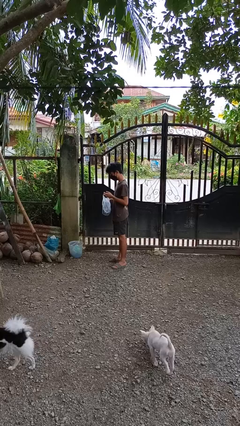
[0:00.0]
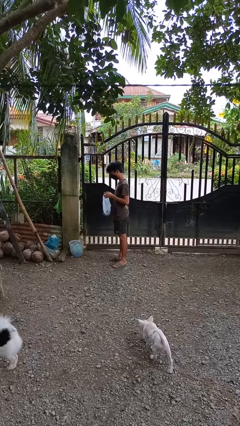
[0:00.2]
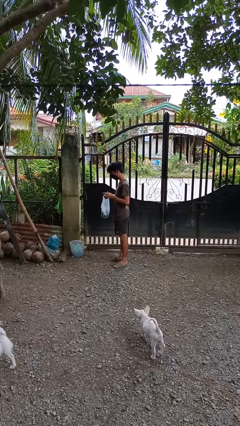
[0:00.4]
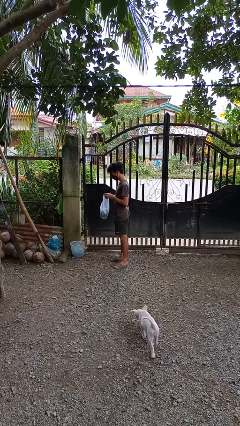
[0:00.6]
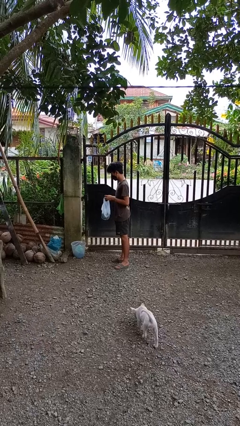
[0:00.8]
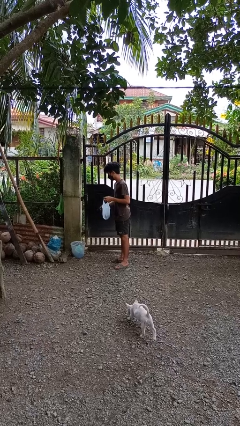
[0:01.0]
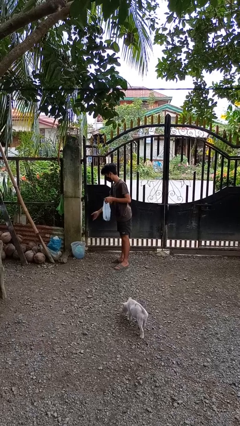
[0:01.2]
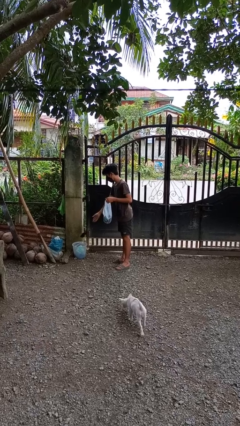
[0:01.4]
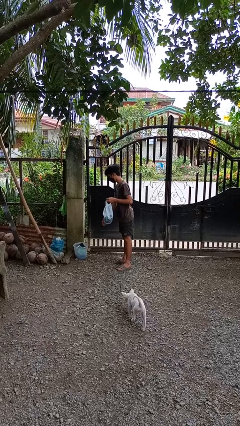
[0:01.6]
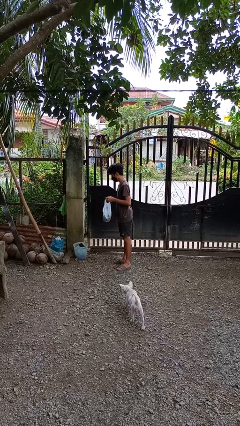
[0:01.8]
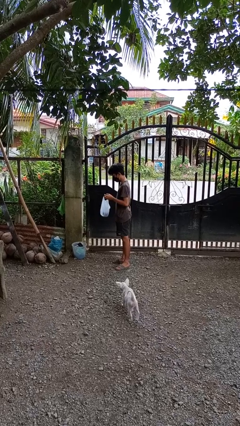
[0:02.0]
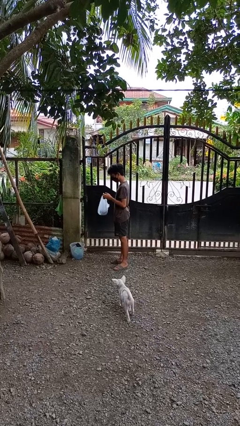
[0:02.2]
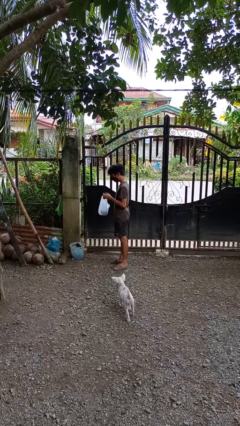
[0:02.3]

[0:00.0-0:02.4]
person discards trash

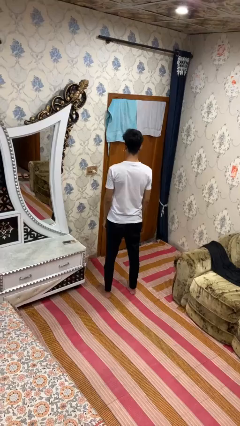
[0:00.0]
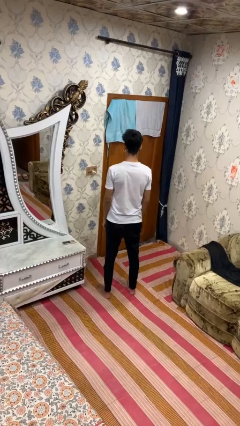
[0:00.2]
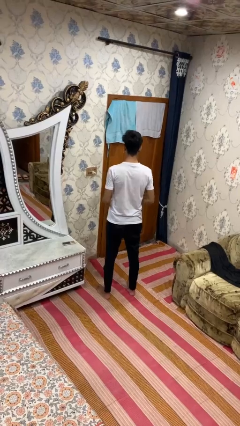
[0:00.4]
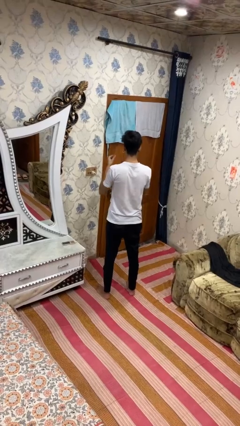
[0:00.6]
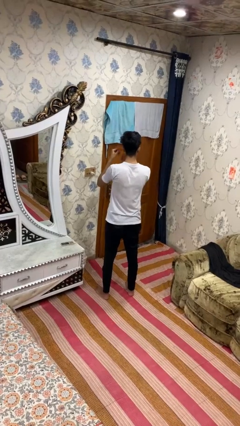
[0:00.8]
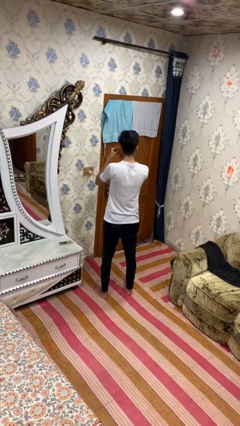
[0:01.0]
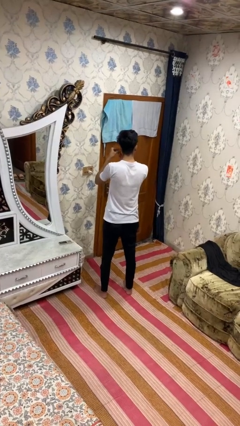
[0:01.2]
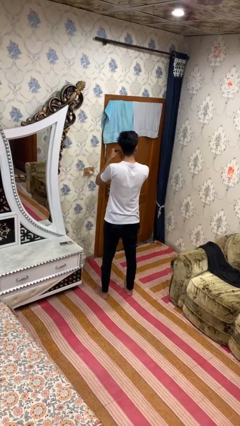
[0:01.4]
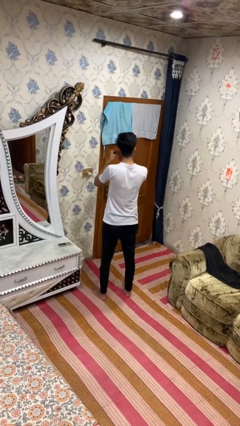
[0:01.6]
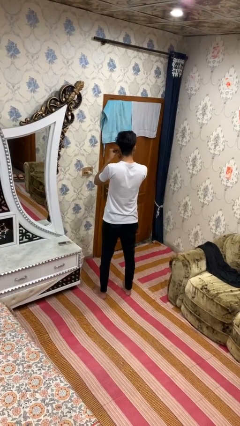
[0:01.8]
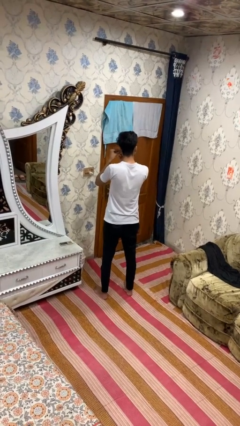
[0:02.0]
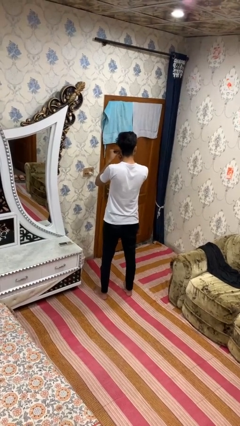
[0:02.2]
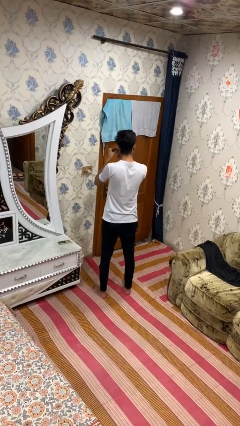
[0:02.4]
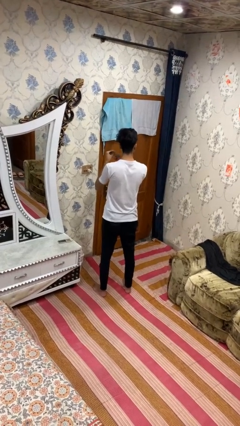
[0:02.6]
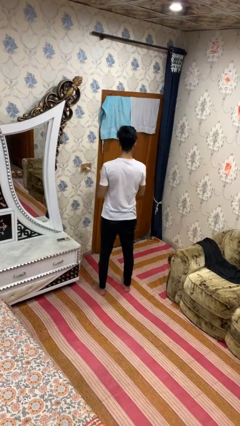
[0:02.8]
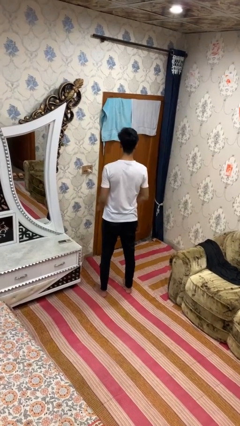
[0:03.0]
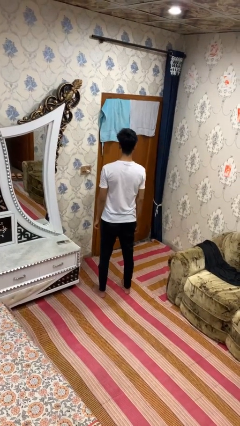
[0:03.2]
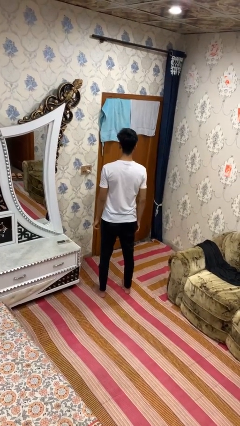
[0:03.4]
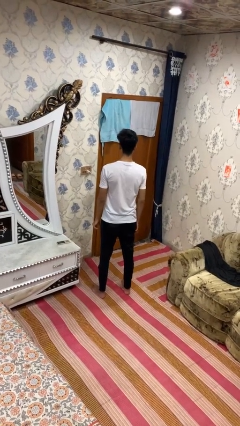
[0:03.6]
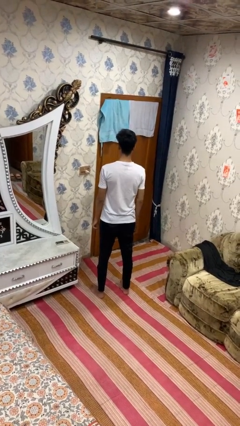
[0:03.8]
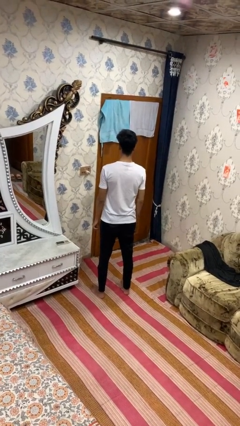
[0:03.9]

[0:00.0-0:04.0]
person takes off earrings

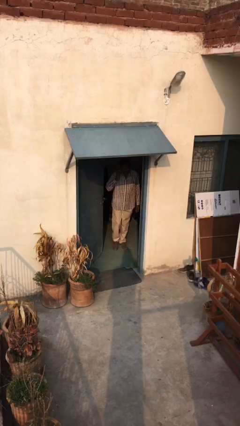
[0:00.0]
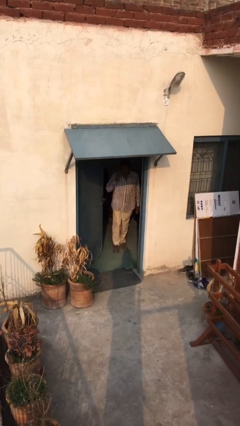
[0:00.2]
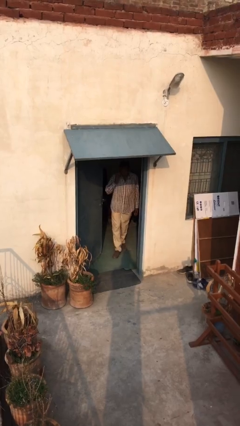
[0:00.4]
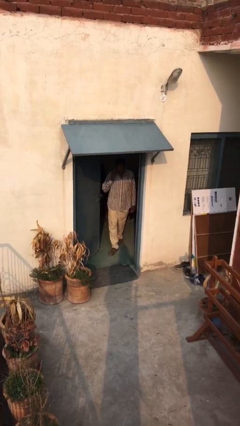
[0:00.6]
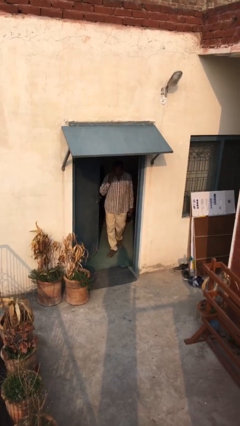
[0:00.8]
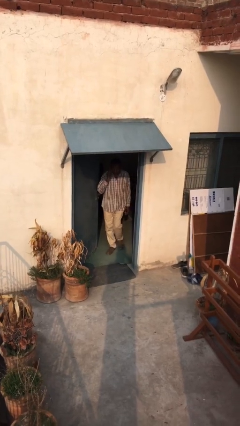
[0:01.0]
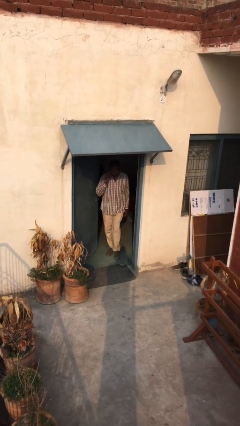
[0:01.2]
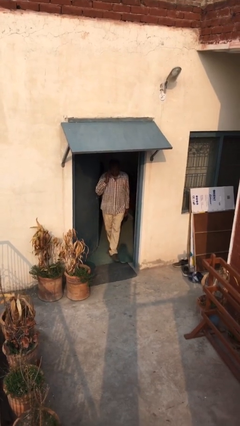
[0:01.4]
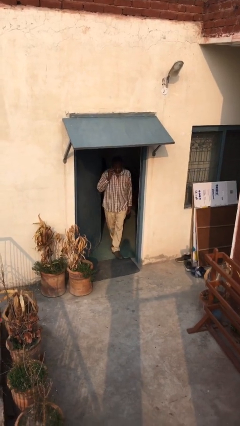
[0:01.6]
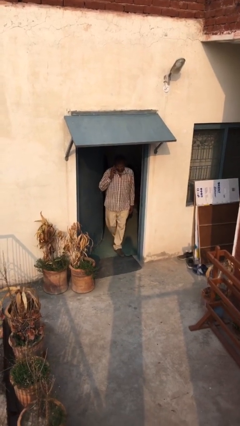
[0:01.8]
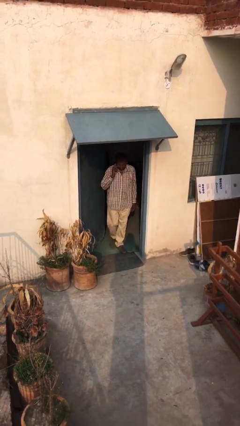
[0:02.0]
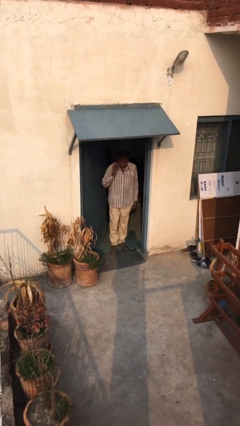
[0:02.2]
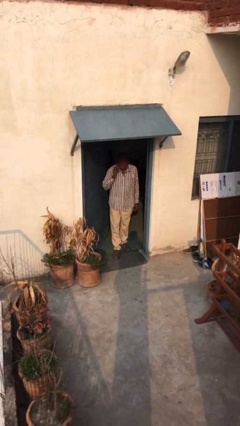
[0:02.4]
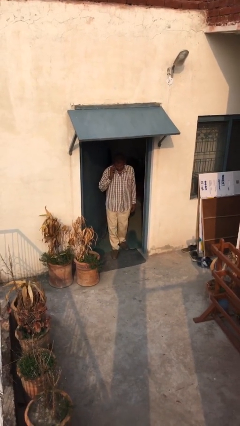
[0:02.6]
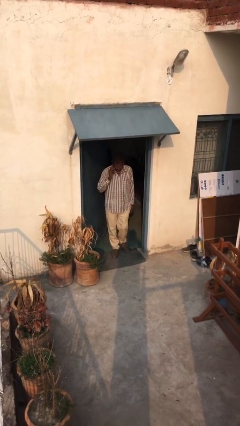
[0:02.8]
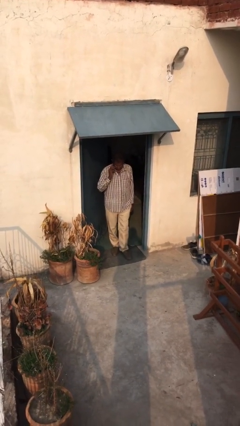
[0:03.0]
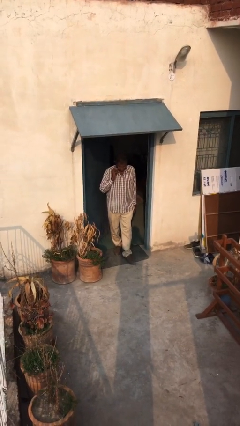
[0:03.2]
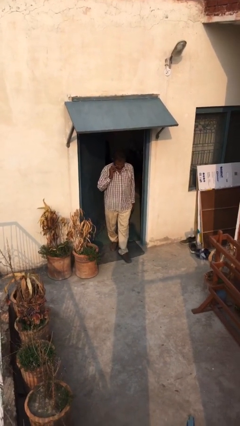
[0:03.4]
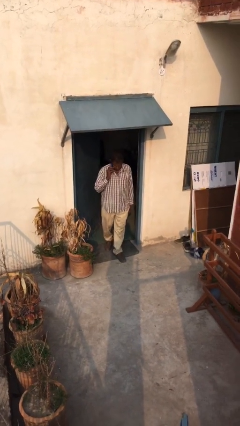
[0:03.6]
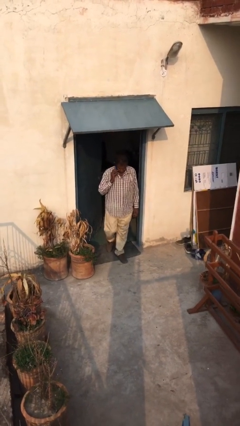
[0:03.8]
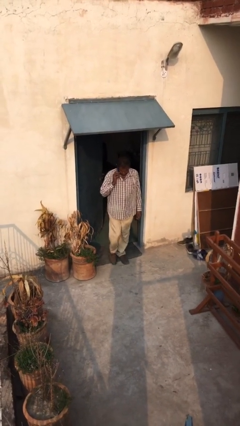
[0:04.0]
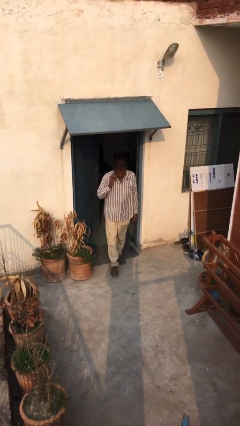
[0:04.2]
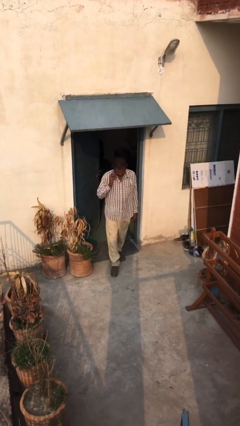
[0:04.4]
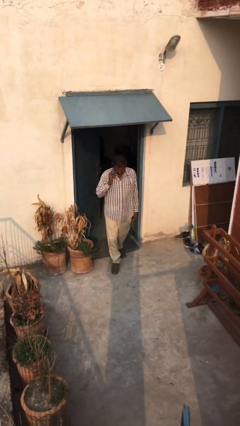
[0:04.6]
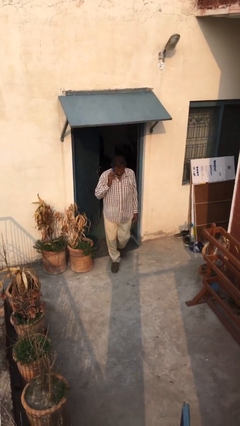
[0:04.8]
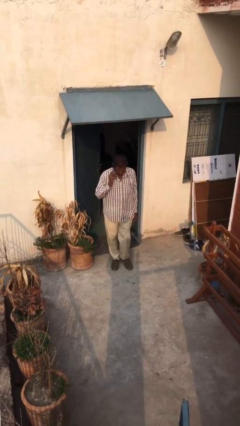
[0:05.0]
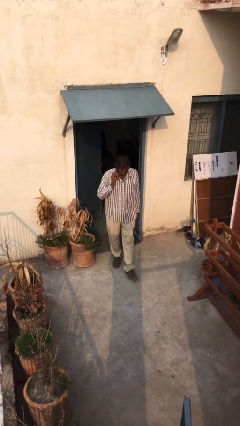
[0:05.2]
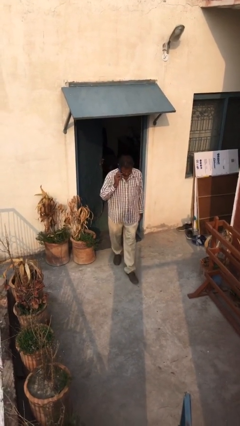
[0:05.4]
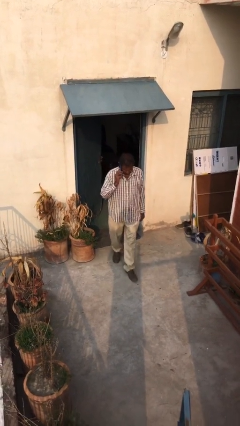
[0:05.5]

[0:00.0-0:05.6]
person enters scene through structure

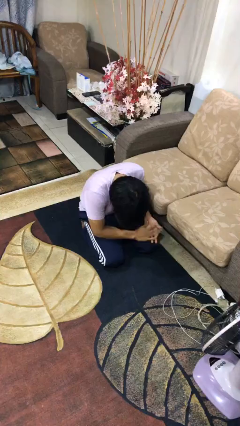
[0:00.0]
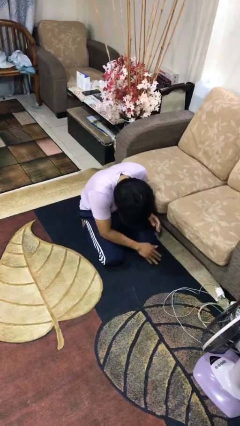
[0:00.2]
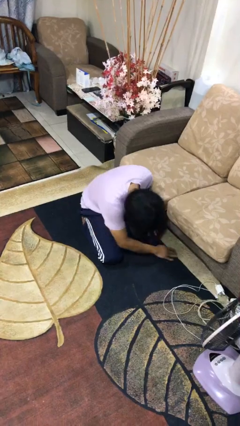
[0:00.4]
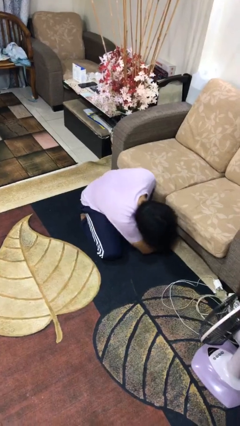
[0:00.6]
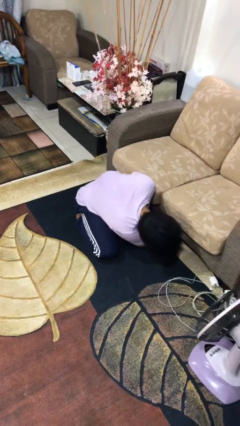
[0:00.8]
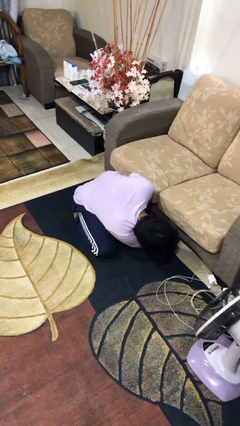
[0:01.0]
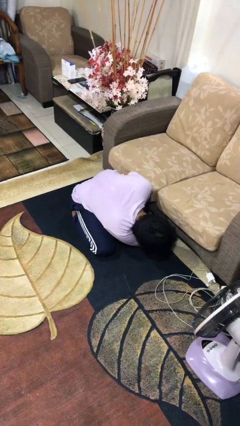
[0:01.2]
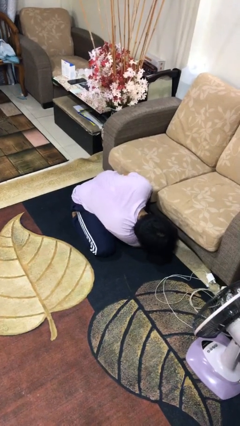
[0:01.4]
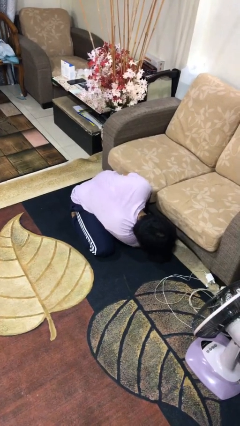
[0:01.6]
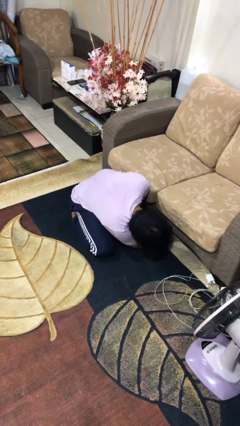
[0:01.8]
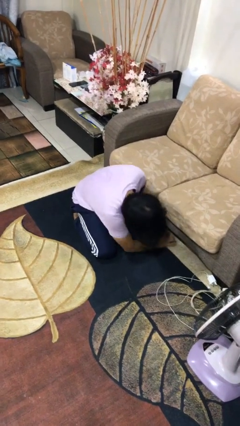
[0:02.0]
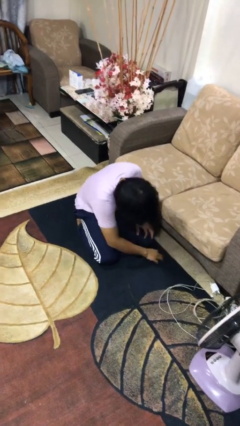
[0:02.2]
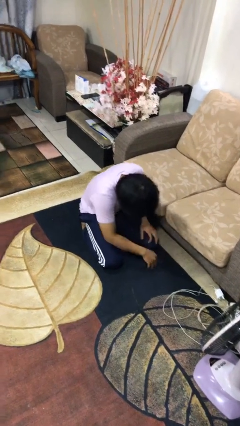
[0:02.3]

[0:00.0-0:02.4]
person searches under couch

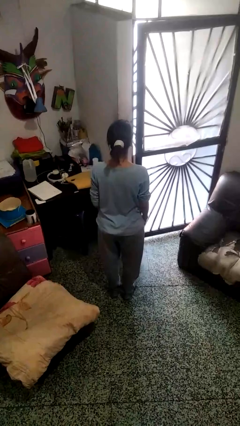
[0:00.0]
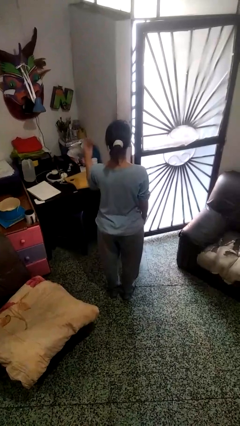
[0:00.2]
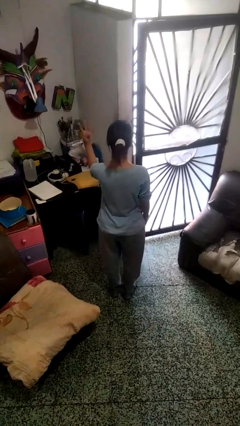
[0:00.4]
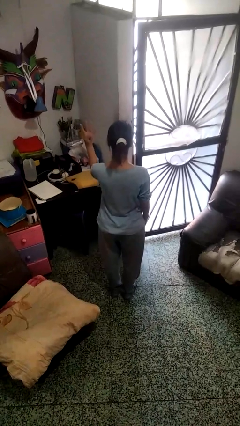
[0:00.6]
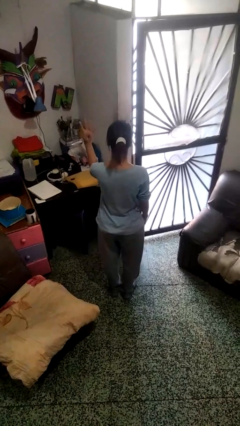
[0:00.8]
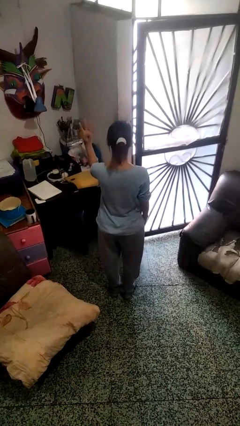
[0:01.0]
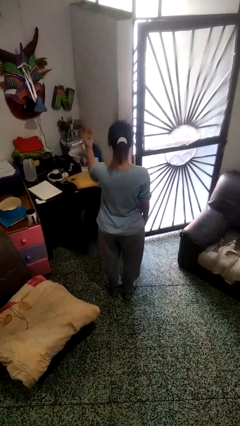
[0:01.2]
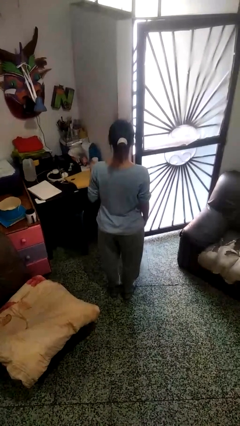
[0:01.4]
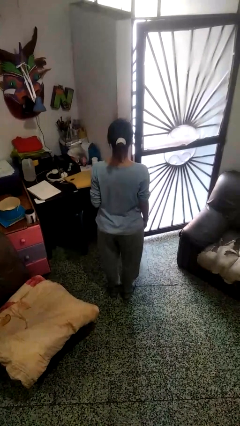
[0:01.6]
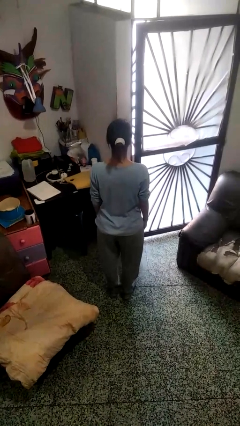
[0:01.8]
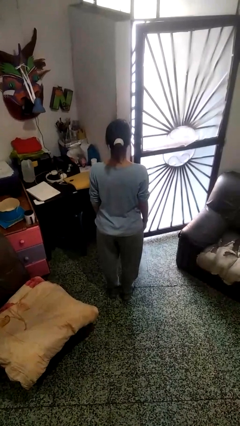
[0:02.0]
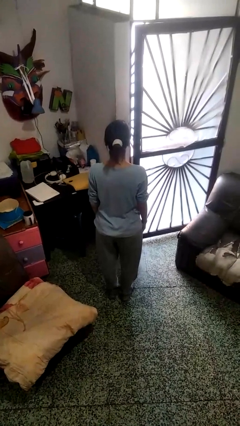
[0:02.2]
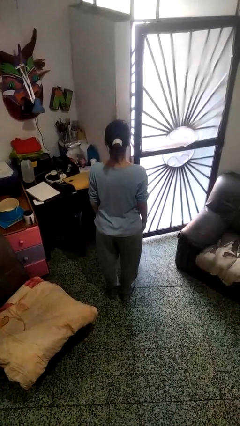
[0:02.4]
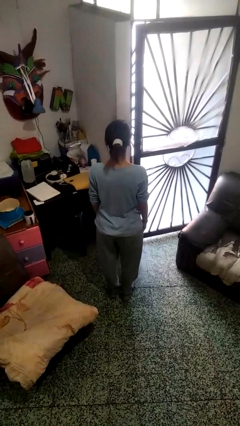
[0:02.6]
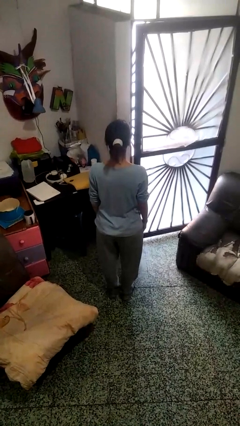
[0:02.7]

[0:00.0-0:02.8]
person gestures number four
